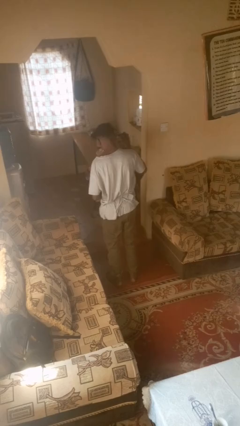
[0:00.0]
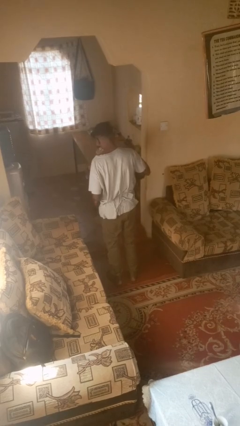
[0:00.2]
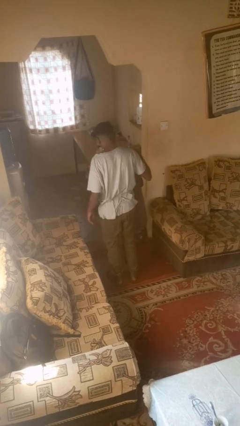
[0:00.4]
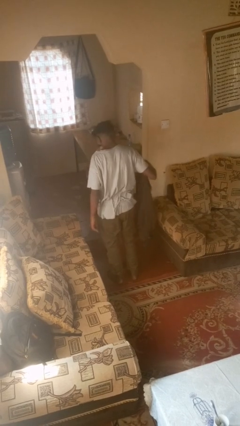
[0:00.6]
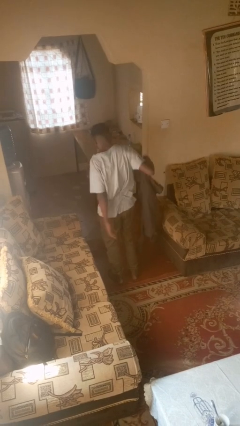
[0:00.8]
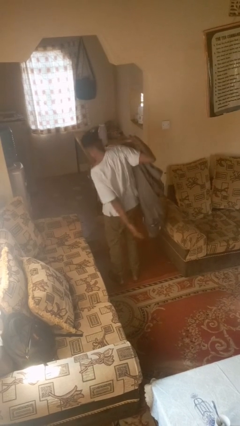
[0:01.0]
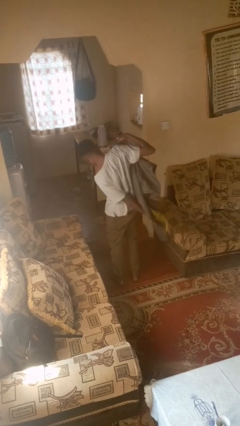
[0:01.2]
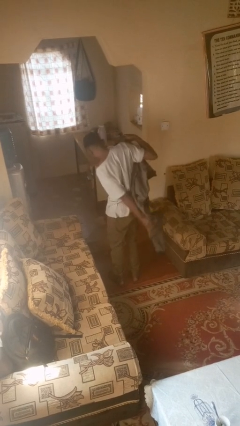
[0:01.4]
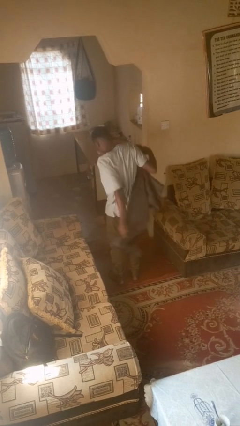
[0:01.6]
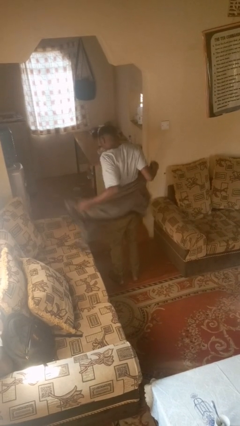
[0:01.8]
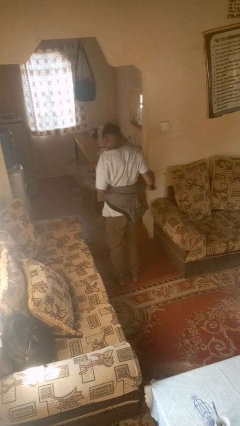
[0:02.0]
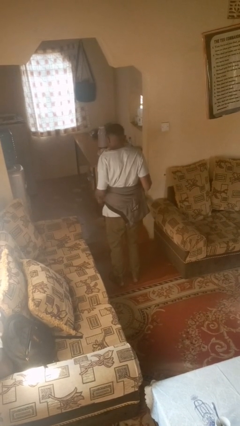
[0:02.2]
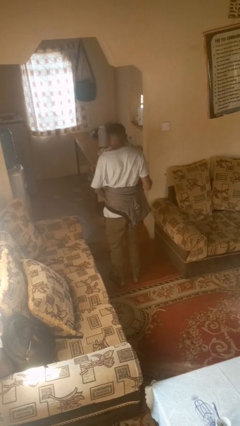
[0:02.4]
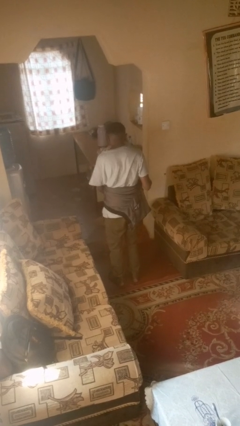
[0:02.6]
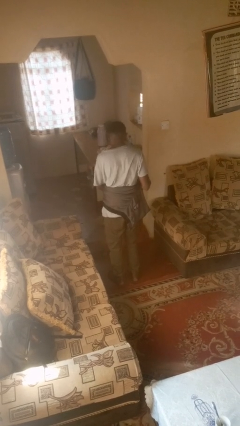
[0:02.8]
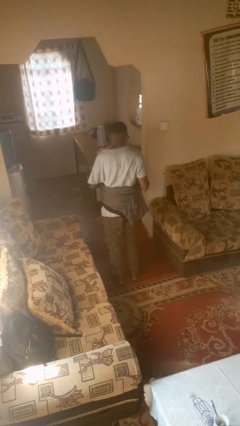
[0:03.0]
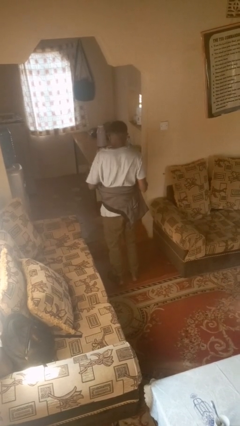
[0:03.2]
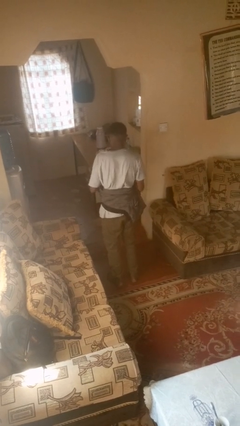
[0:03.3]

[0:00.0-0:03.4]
person ties jacket around waist

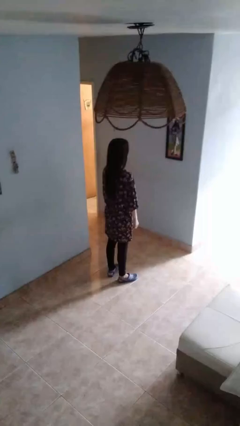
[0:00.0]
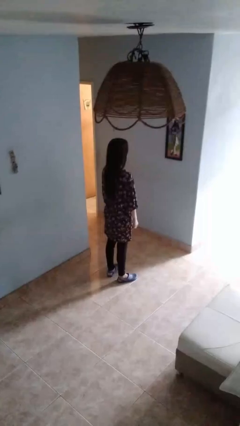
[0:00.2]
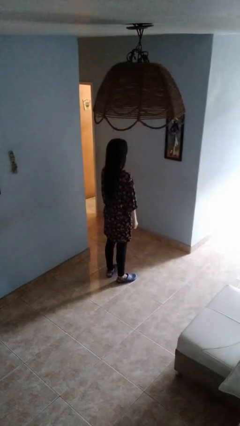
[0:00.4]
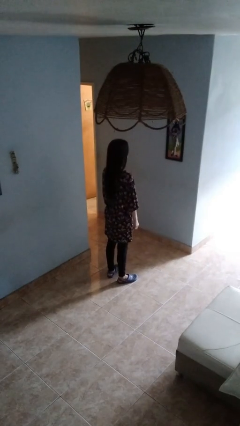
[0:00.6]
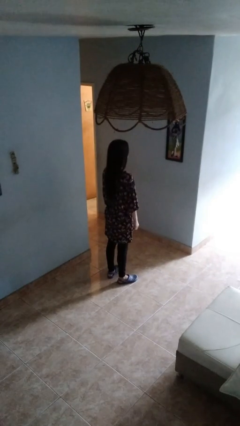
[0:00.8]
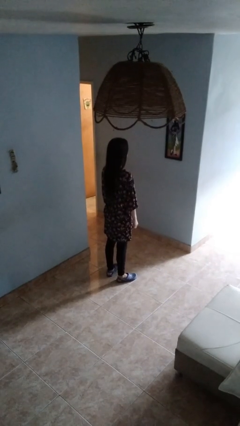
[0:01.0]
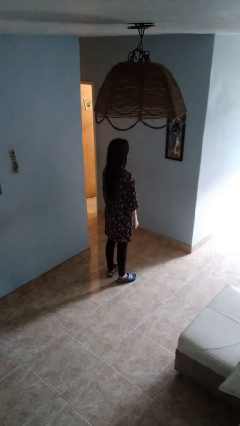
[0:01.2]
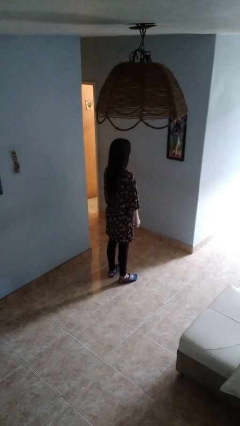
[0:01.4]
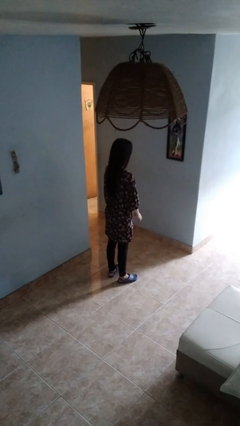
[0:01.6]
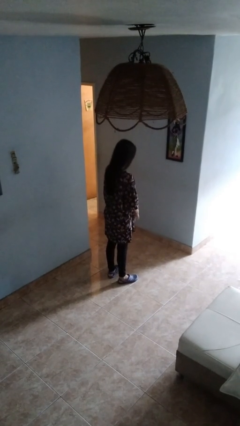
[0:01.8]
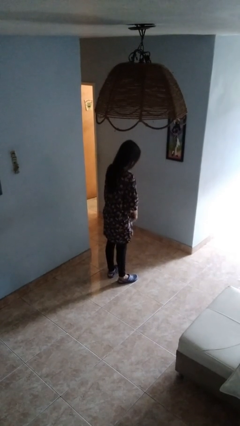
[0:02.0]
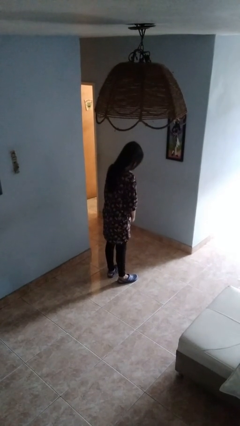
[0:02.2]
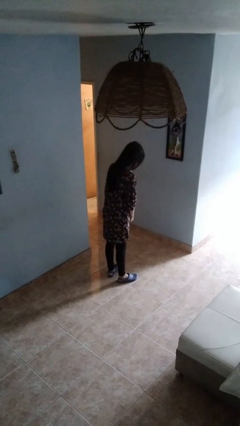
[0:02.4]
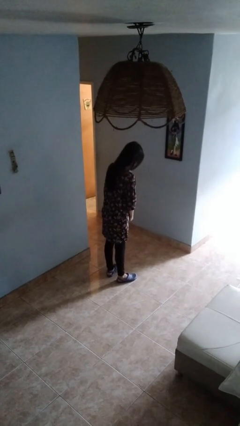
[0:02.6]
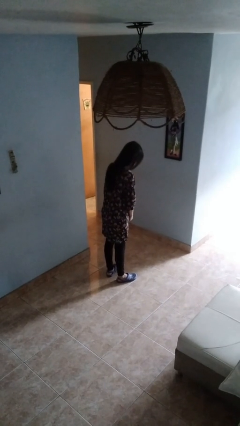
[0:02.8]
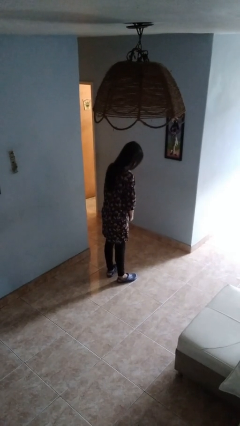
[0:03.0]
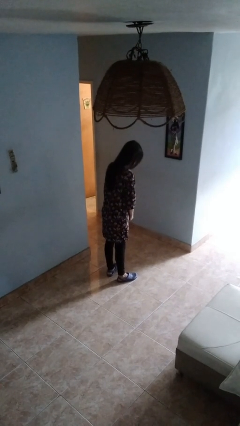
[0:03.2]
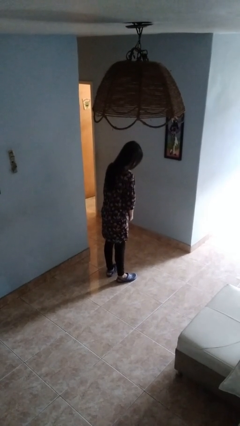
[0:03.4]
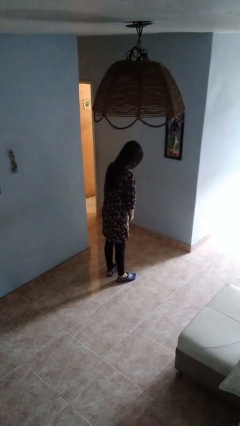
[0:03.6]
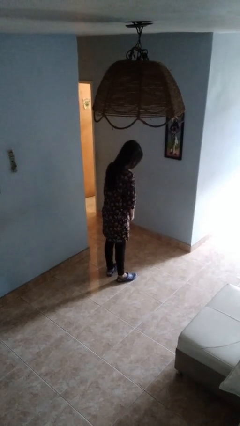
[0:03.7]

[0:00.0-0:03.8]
person prays

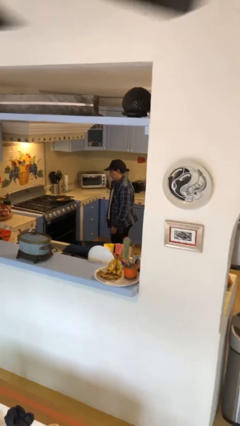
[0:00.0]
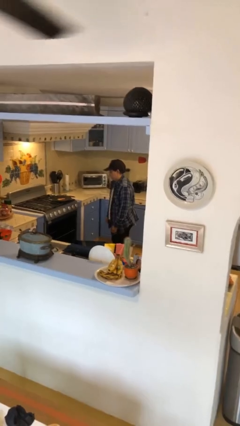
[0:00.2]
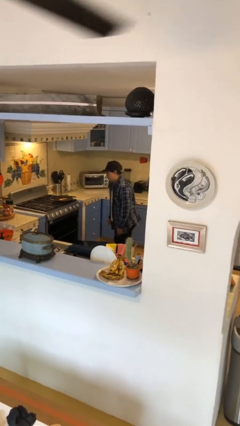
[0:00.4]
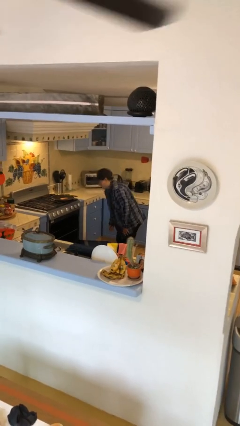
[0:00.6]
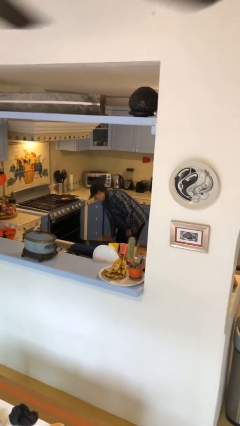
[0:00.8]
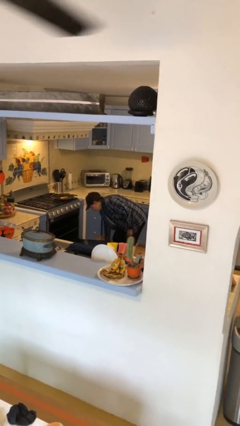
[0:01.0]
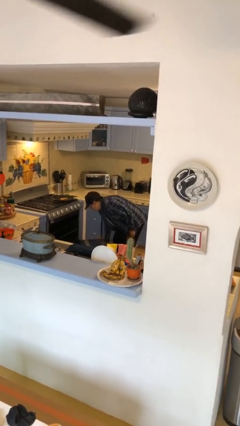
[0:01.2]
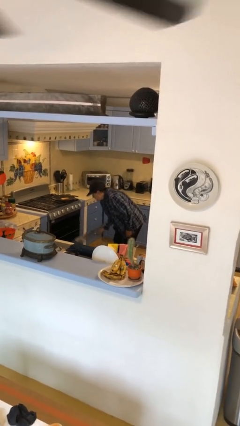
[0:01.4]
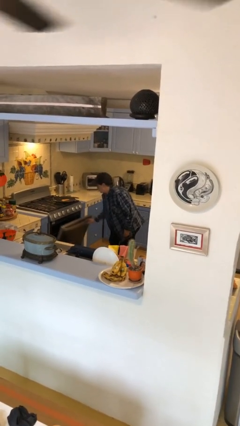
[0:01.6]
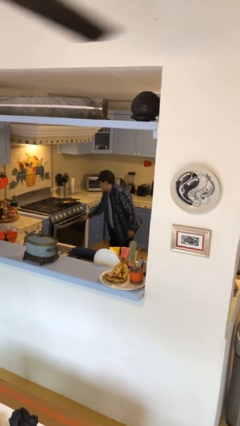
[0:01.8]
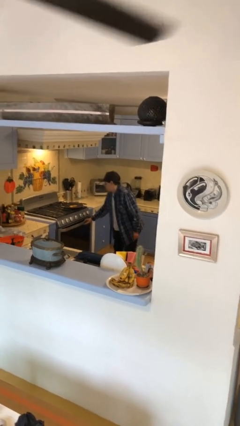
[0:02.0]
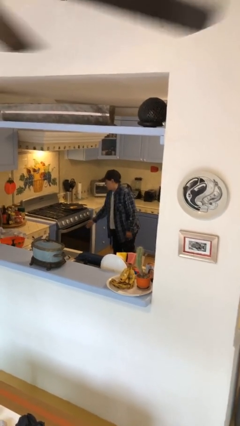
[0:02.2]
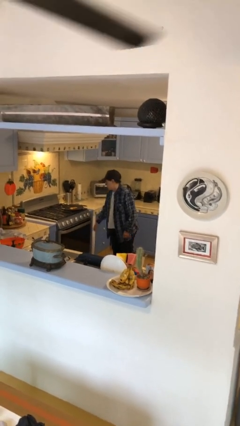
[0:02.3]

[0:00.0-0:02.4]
person takes object from toaster

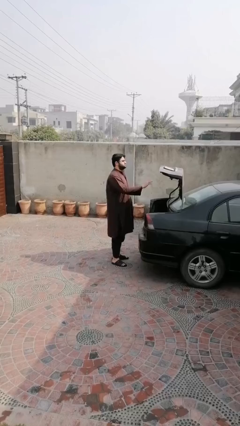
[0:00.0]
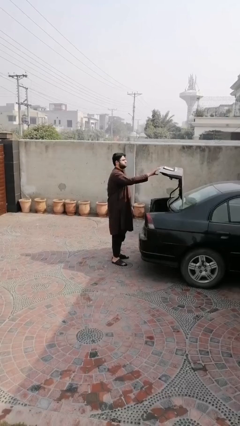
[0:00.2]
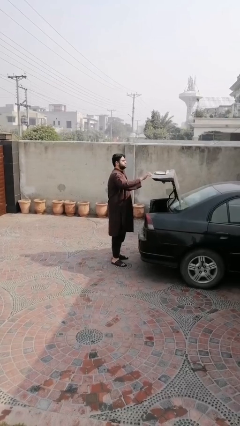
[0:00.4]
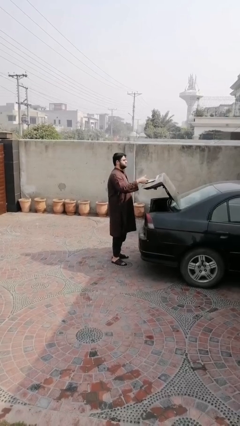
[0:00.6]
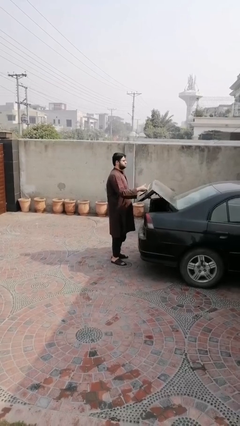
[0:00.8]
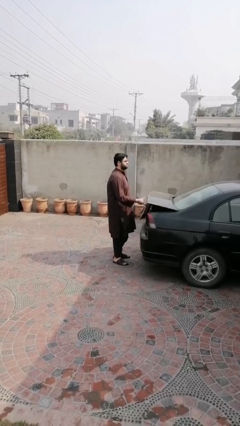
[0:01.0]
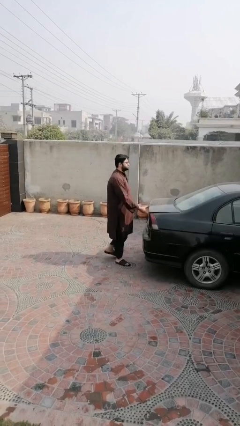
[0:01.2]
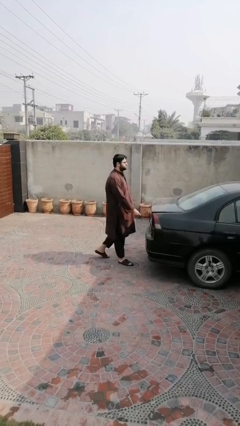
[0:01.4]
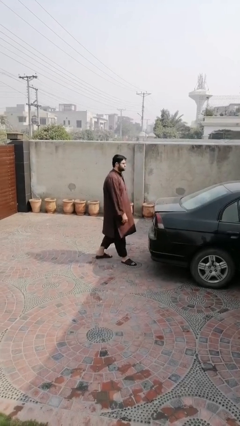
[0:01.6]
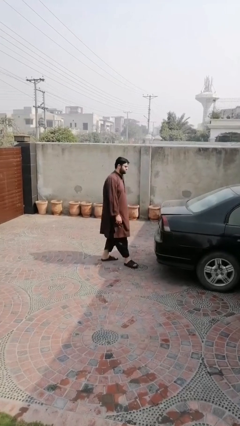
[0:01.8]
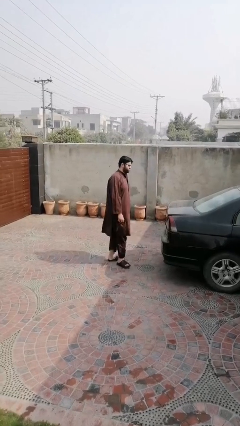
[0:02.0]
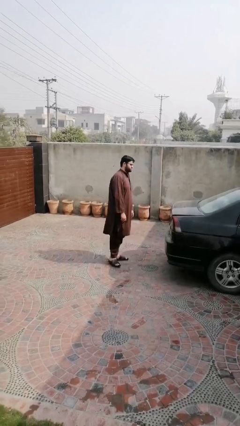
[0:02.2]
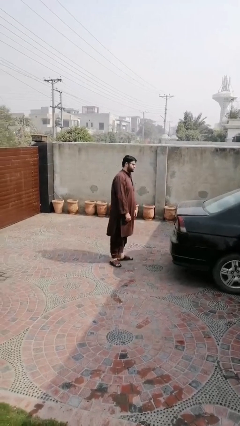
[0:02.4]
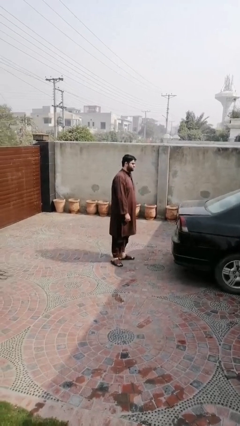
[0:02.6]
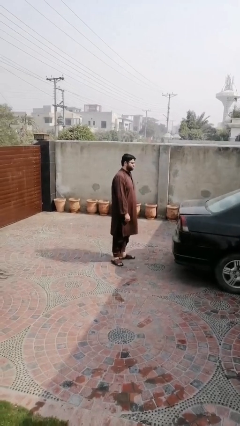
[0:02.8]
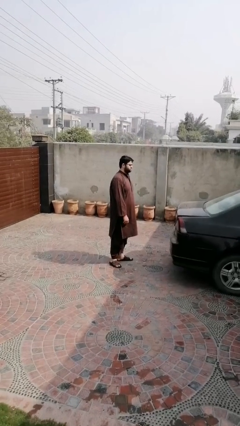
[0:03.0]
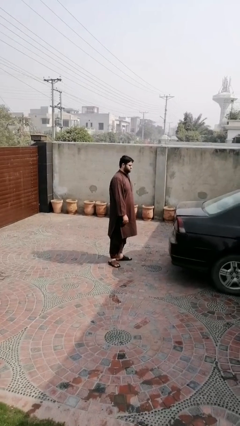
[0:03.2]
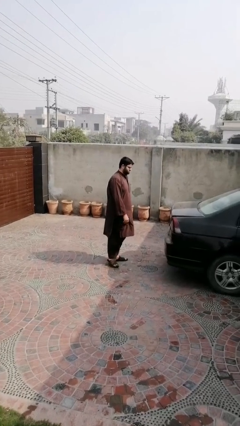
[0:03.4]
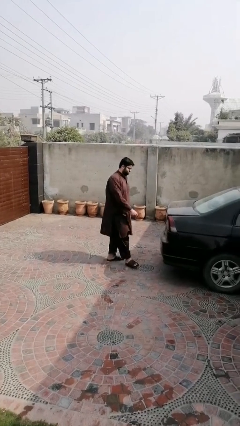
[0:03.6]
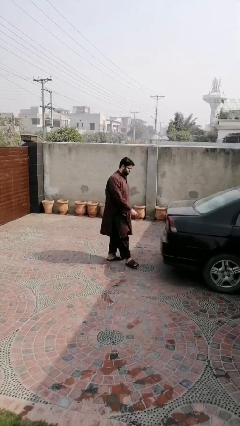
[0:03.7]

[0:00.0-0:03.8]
person closes car trunk

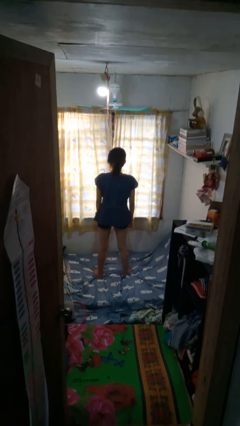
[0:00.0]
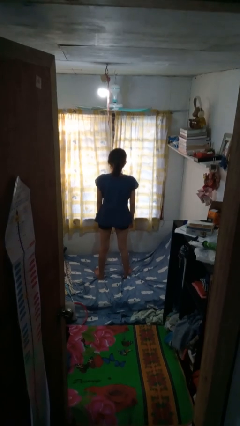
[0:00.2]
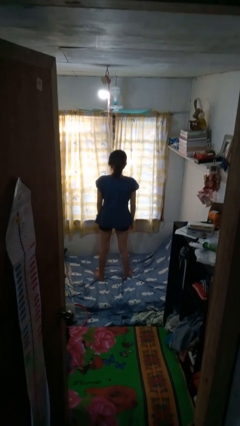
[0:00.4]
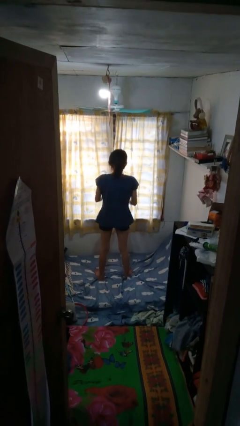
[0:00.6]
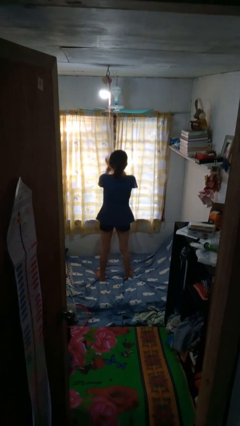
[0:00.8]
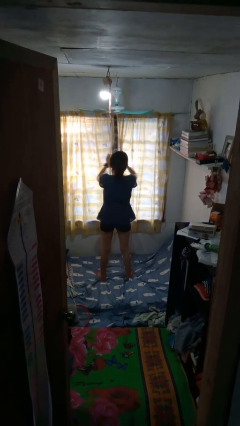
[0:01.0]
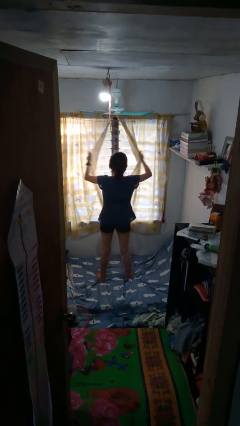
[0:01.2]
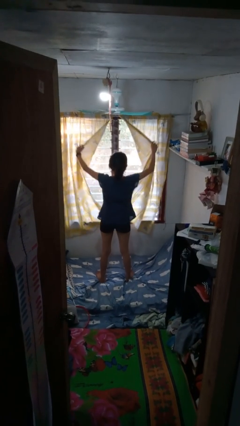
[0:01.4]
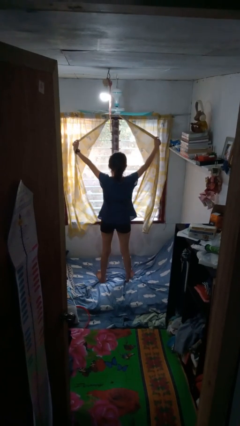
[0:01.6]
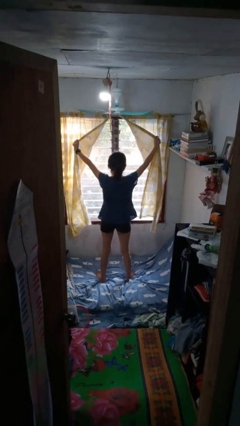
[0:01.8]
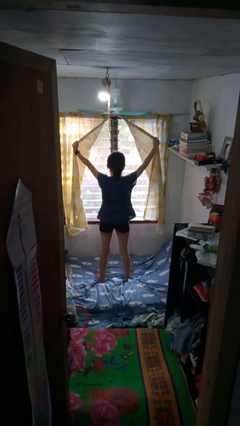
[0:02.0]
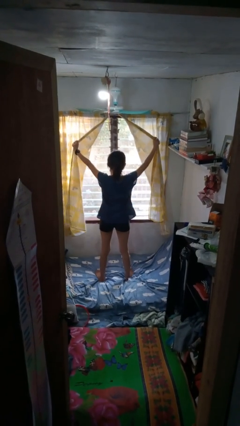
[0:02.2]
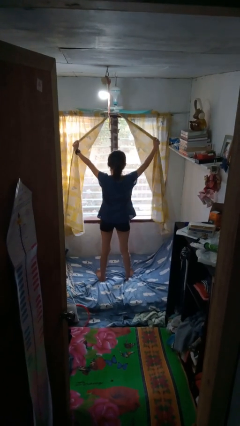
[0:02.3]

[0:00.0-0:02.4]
person opens curtains

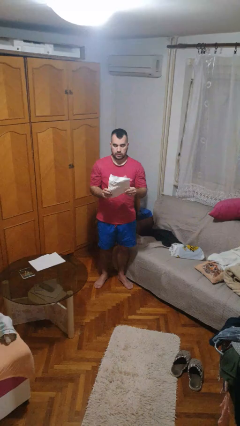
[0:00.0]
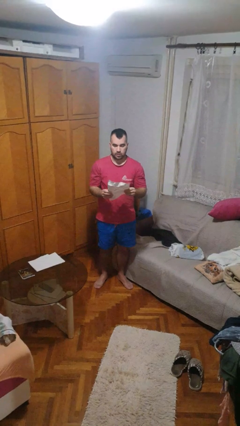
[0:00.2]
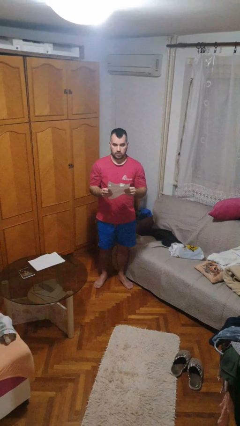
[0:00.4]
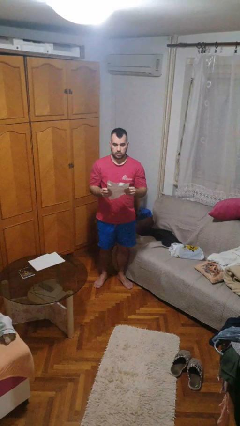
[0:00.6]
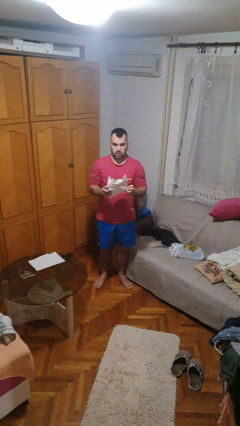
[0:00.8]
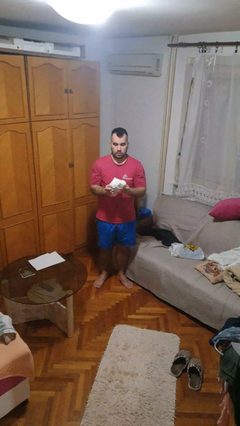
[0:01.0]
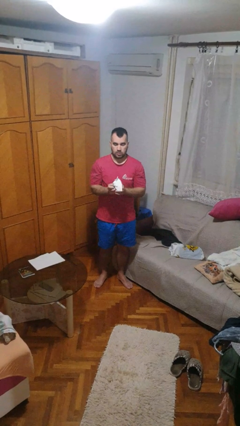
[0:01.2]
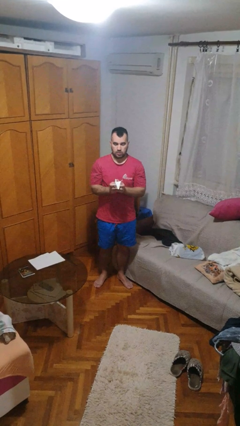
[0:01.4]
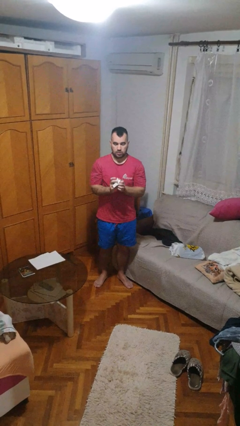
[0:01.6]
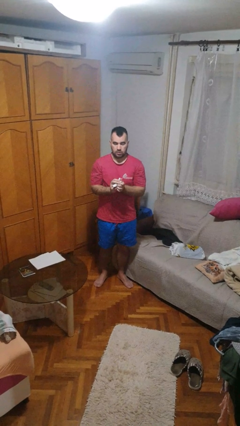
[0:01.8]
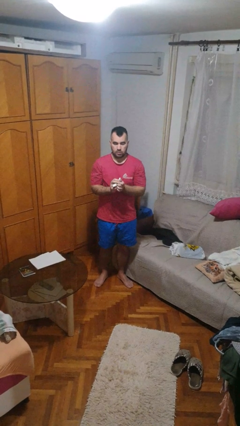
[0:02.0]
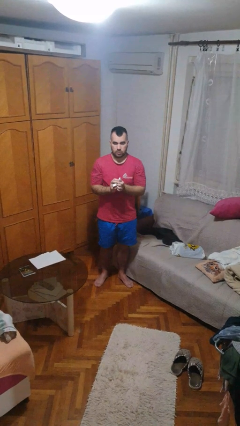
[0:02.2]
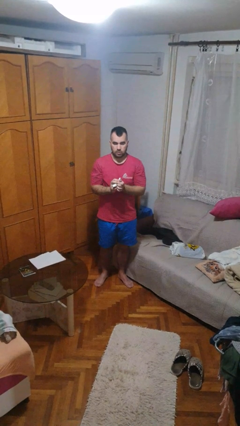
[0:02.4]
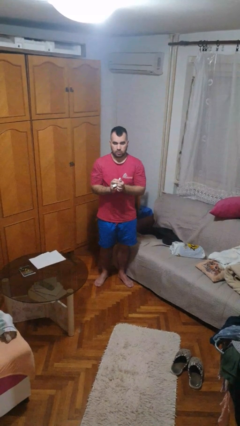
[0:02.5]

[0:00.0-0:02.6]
person crumples paper
